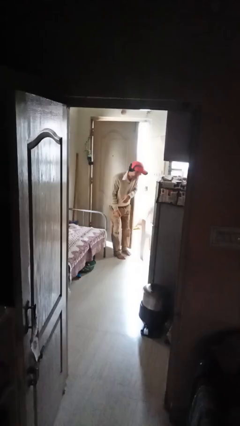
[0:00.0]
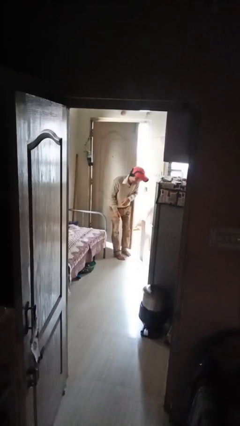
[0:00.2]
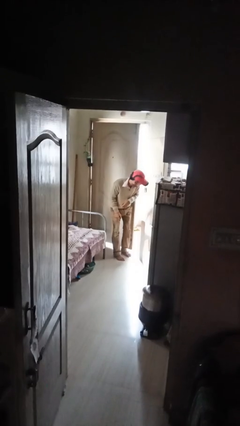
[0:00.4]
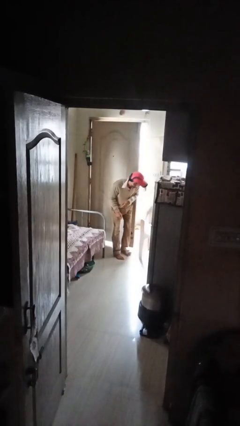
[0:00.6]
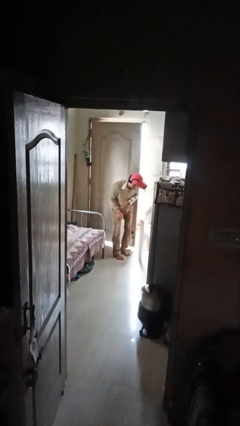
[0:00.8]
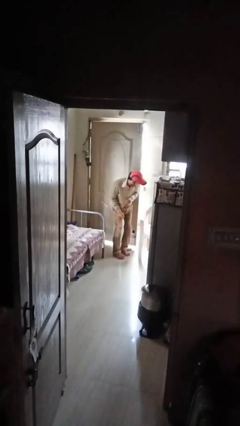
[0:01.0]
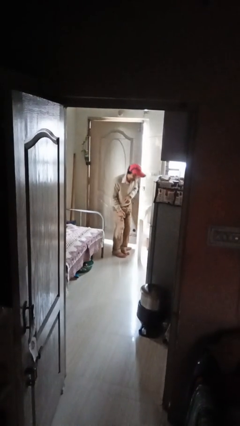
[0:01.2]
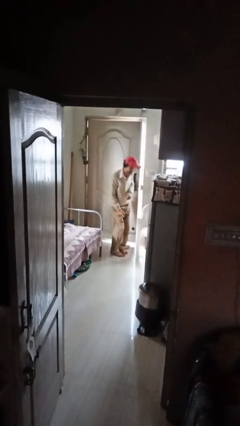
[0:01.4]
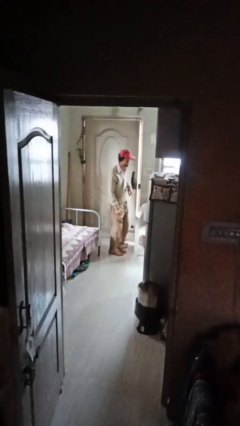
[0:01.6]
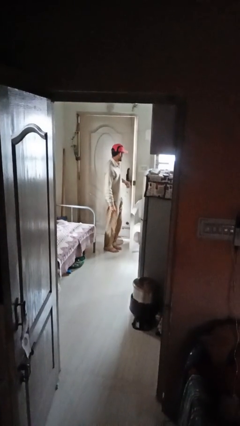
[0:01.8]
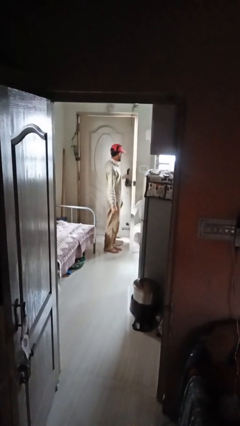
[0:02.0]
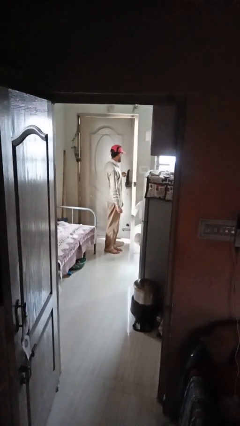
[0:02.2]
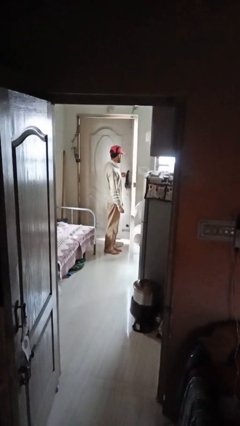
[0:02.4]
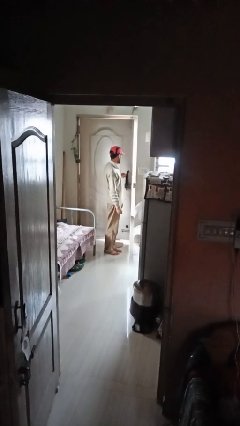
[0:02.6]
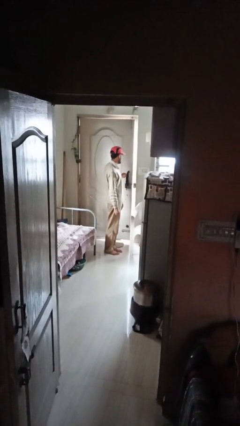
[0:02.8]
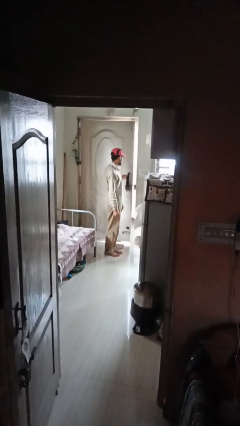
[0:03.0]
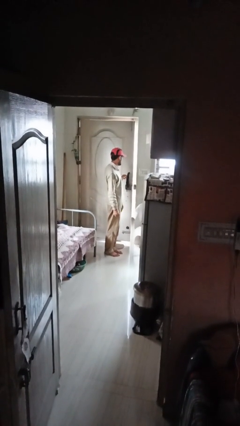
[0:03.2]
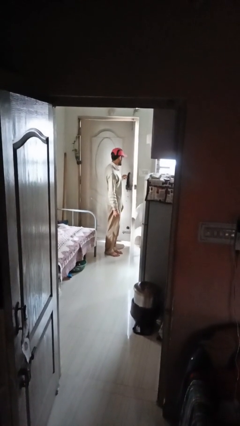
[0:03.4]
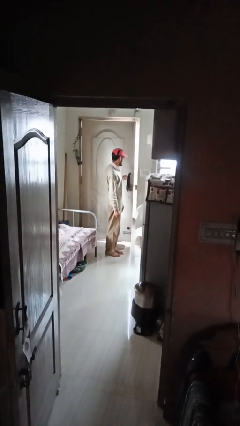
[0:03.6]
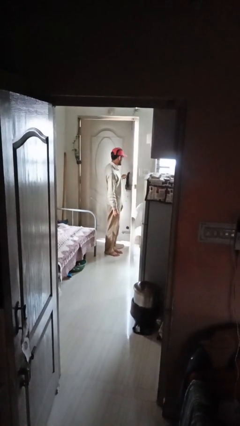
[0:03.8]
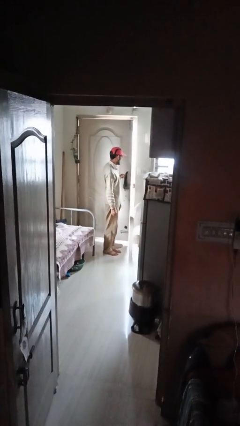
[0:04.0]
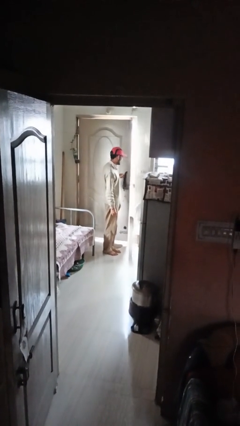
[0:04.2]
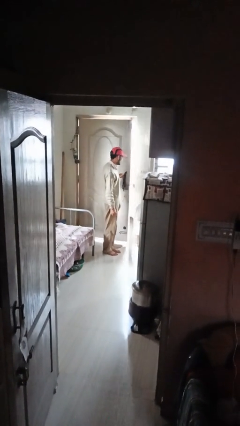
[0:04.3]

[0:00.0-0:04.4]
person closes door with hip

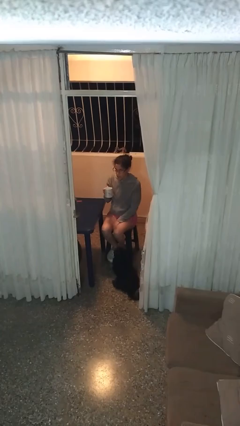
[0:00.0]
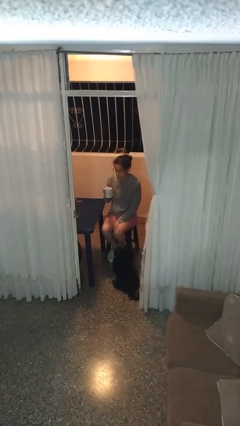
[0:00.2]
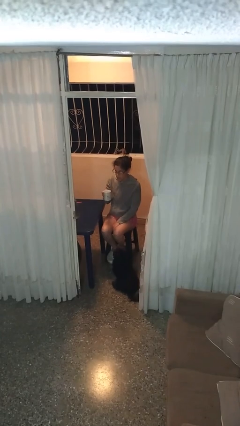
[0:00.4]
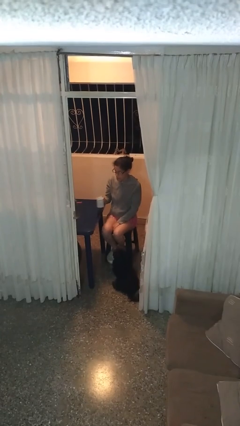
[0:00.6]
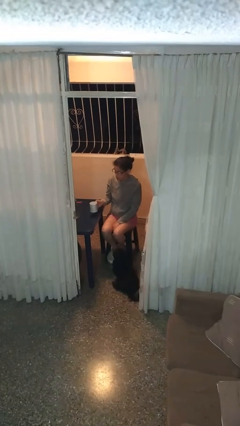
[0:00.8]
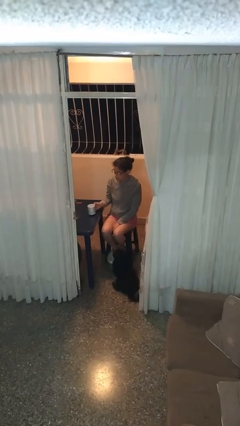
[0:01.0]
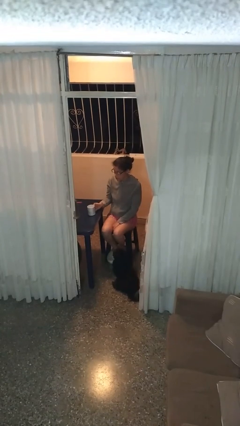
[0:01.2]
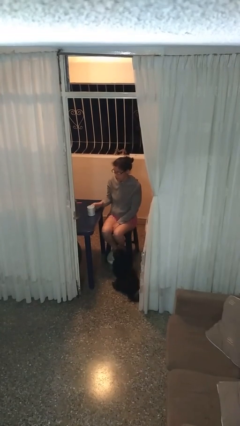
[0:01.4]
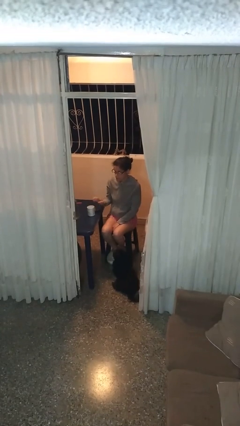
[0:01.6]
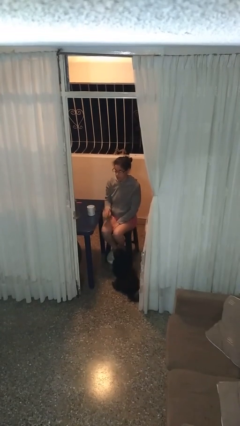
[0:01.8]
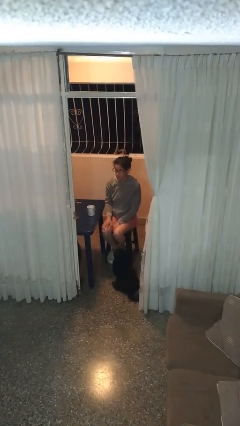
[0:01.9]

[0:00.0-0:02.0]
person puts down object on table

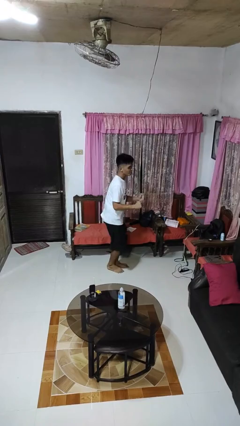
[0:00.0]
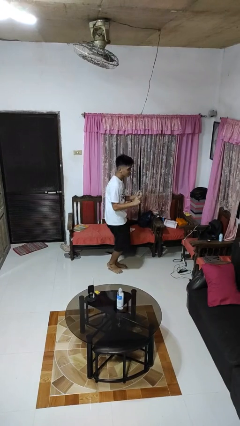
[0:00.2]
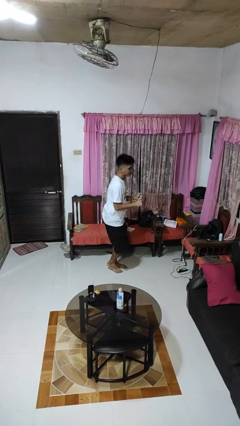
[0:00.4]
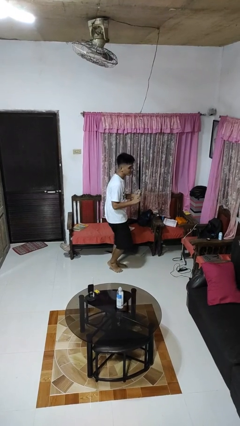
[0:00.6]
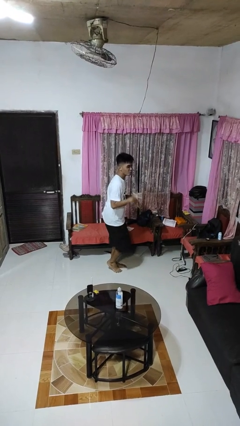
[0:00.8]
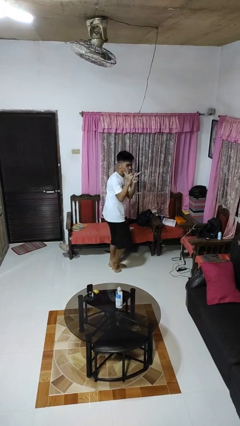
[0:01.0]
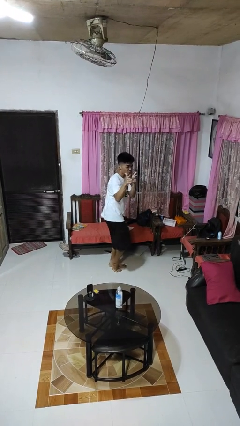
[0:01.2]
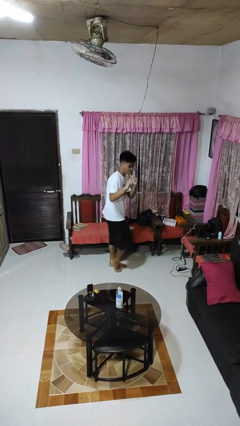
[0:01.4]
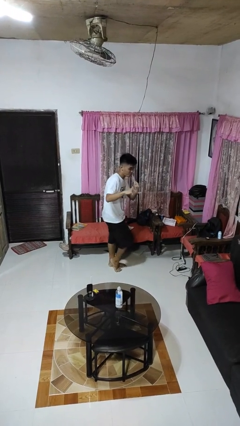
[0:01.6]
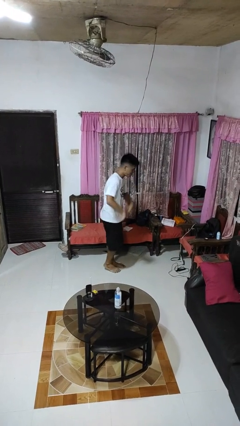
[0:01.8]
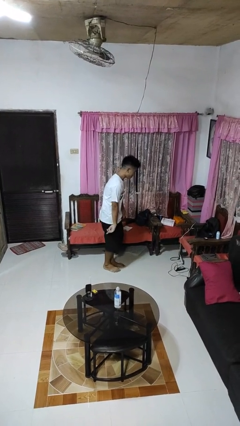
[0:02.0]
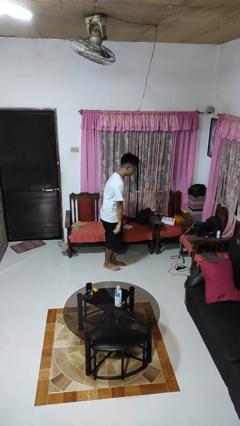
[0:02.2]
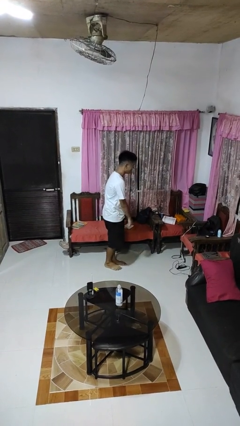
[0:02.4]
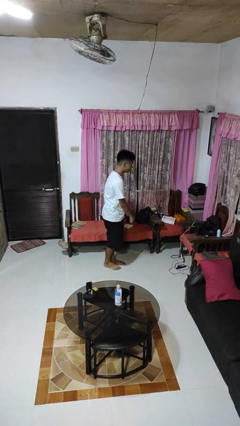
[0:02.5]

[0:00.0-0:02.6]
person dances in place

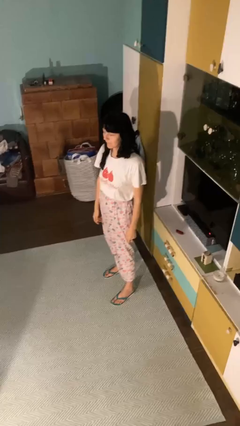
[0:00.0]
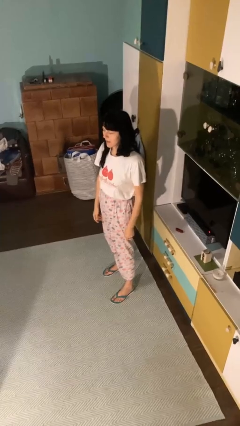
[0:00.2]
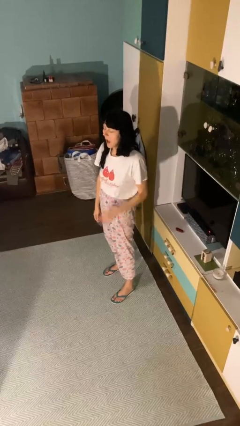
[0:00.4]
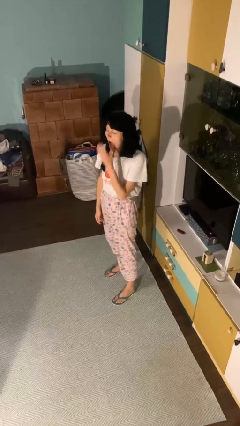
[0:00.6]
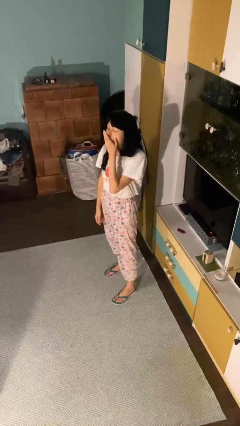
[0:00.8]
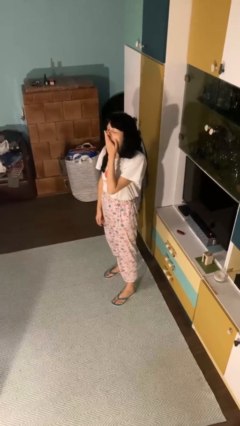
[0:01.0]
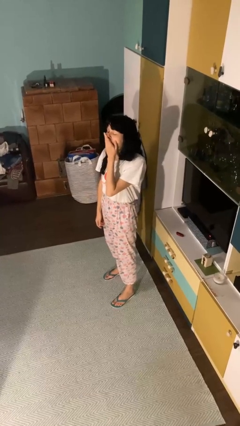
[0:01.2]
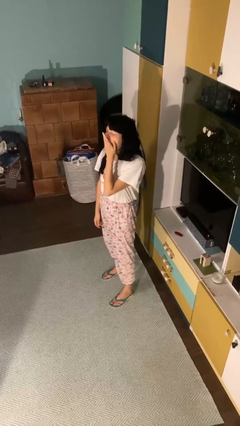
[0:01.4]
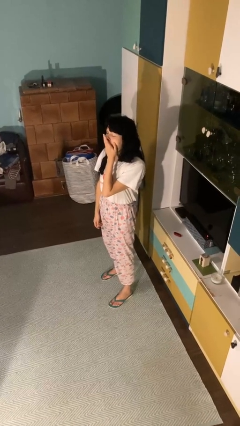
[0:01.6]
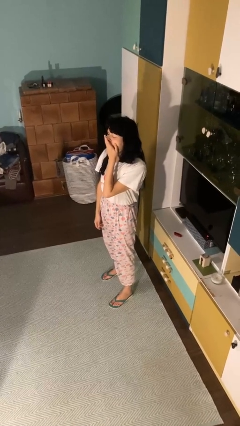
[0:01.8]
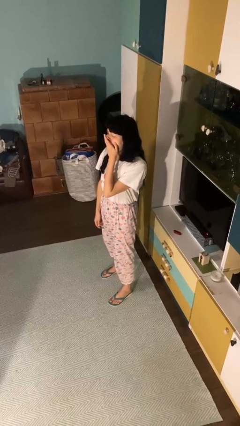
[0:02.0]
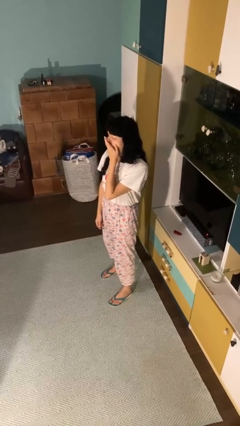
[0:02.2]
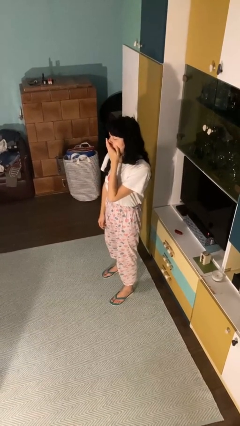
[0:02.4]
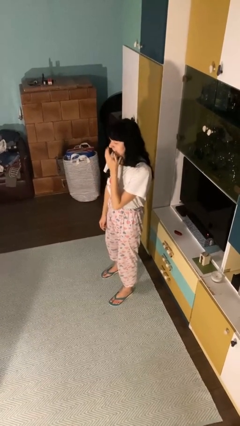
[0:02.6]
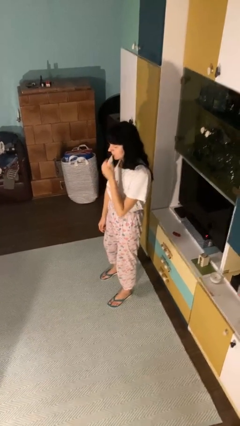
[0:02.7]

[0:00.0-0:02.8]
person yawns

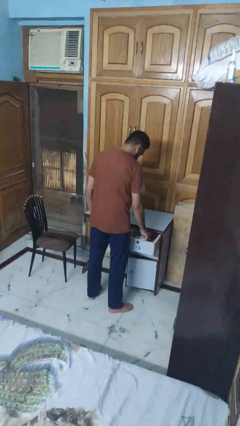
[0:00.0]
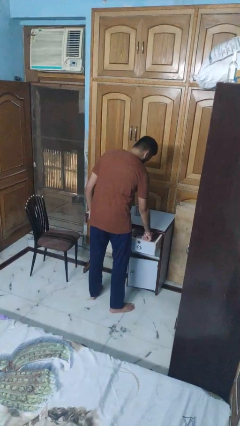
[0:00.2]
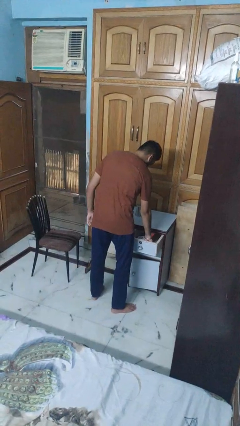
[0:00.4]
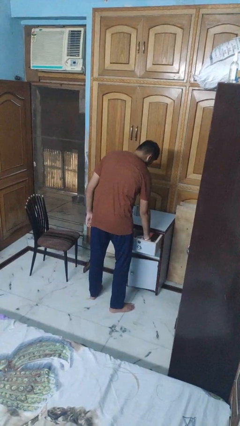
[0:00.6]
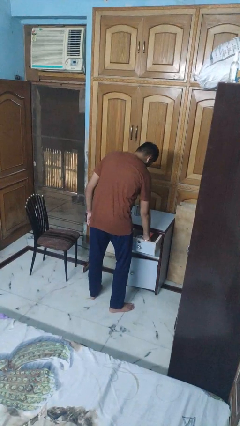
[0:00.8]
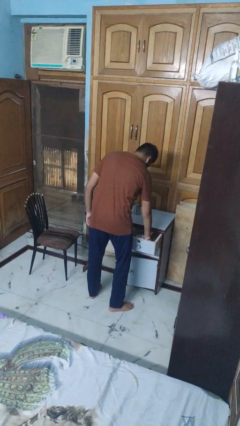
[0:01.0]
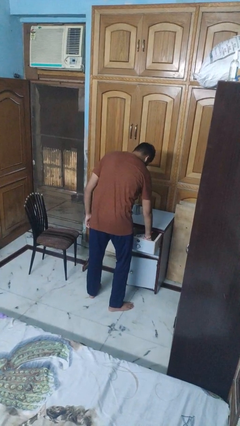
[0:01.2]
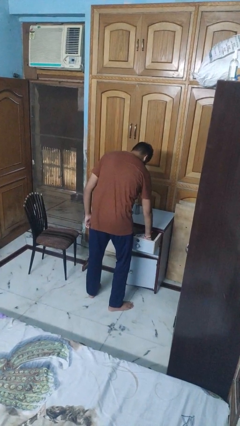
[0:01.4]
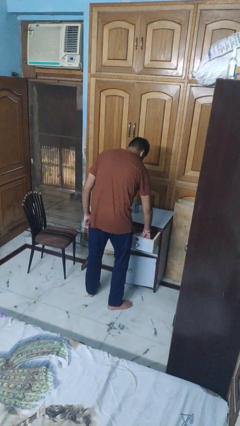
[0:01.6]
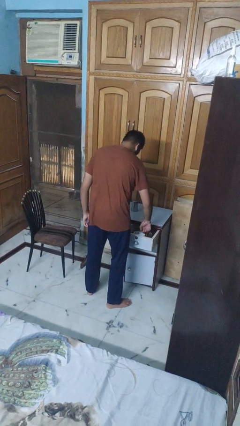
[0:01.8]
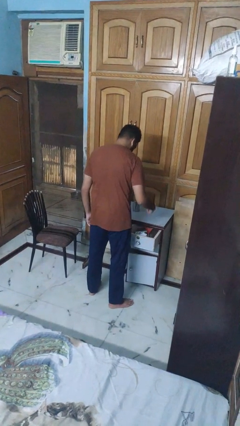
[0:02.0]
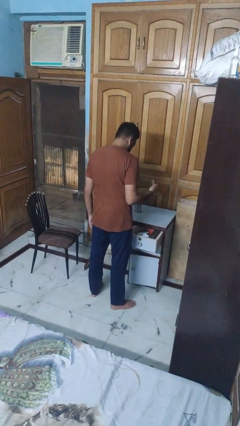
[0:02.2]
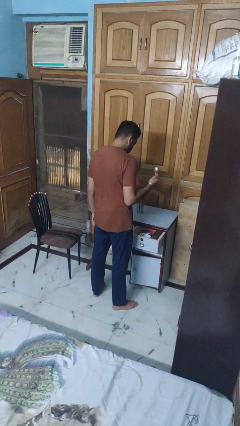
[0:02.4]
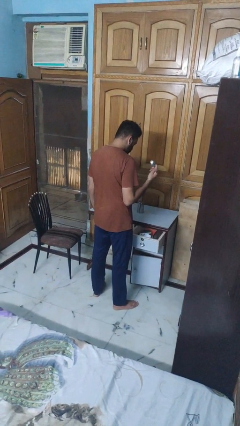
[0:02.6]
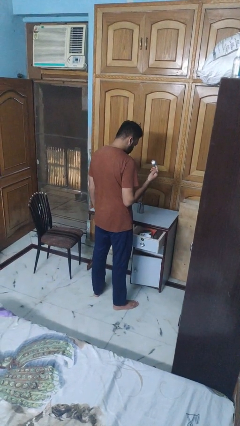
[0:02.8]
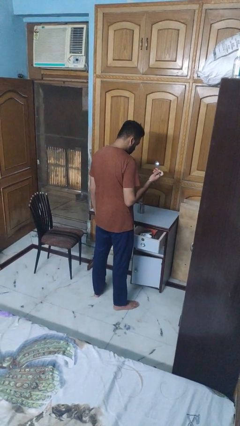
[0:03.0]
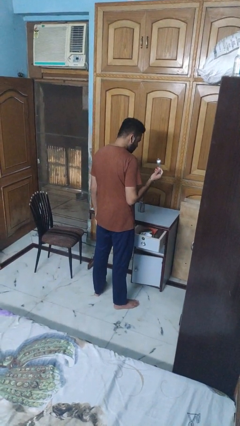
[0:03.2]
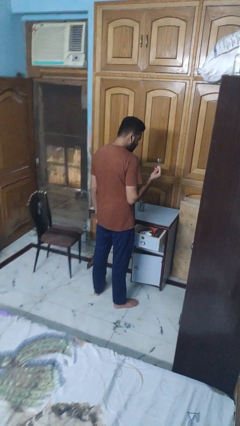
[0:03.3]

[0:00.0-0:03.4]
person takes object from kitchen drawer

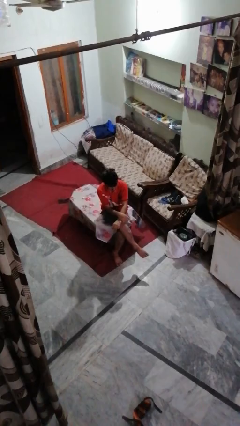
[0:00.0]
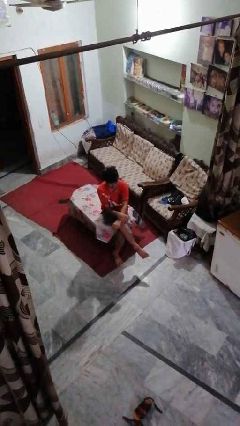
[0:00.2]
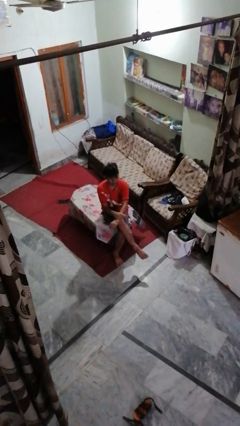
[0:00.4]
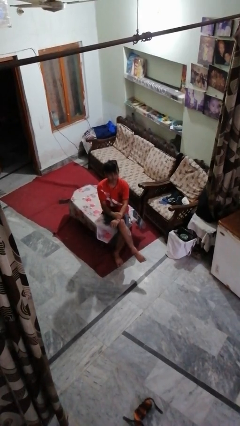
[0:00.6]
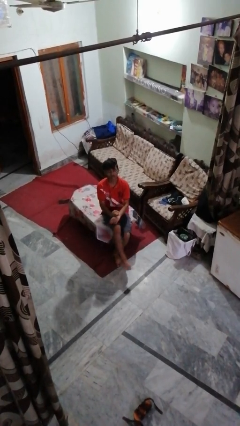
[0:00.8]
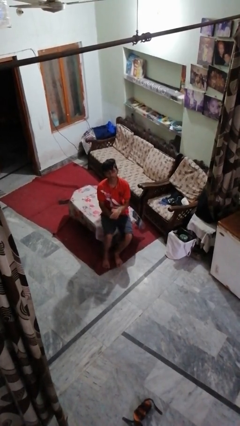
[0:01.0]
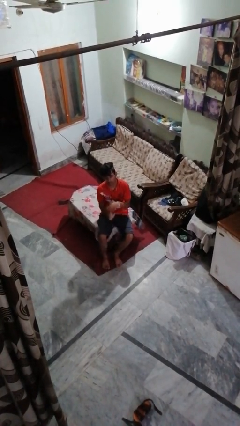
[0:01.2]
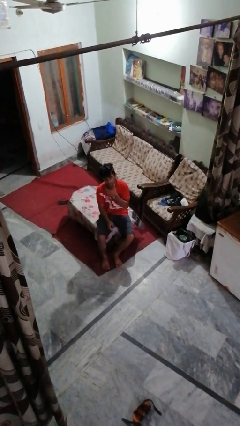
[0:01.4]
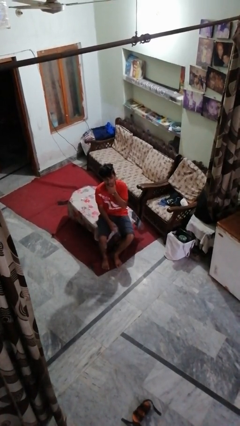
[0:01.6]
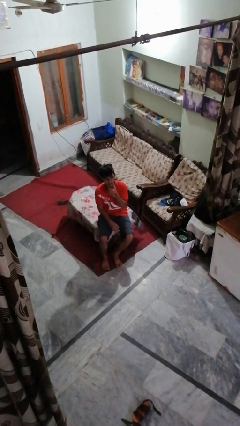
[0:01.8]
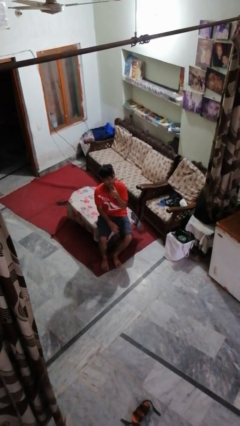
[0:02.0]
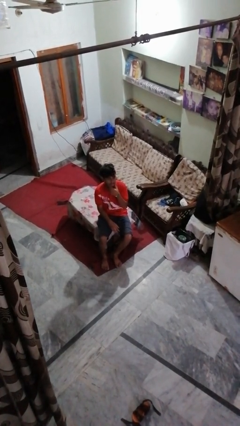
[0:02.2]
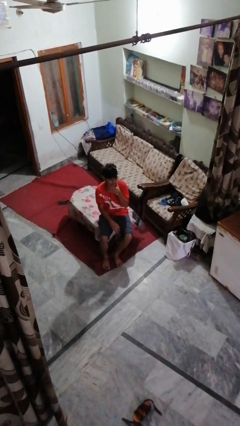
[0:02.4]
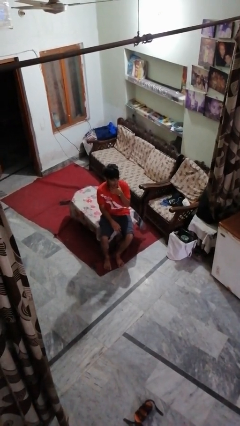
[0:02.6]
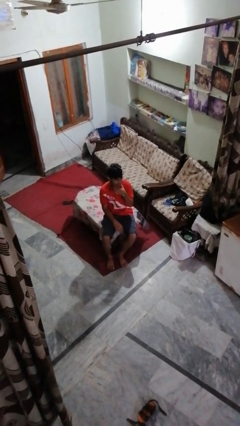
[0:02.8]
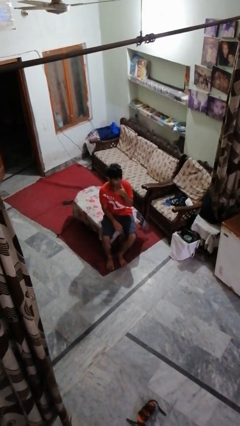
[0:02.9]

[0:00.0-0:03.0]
person strokes chin
